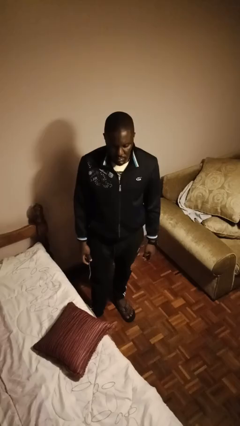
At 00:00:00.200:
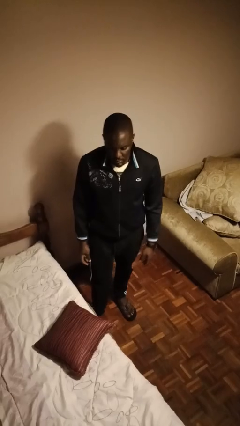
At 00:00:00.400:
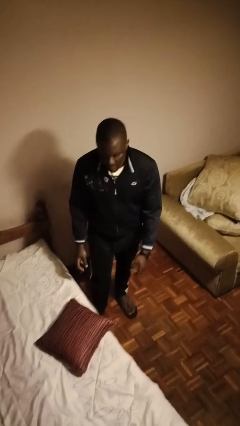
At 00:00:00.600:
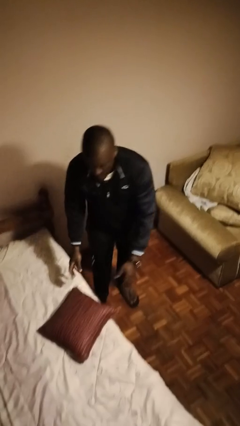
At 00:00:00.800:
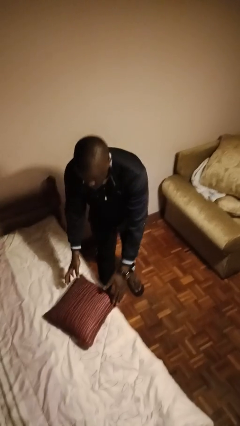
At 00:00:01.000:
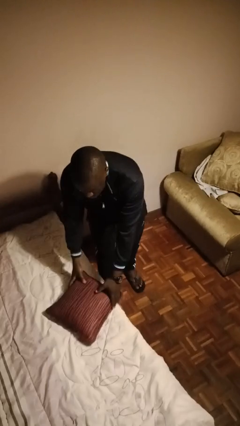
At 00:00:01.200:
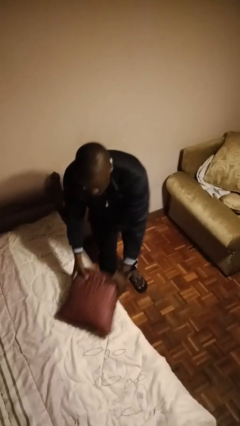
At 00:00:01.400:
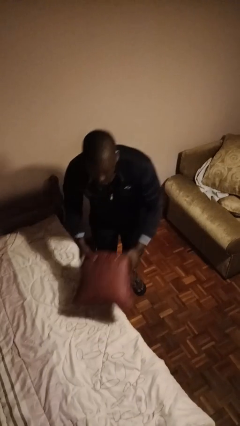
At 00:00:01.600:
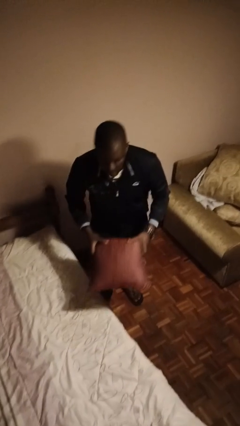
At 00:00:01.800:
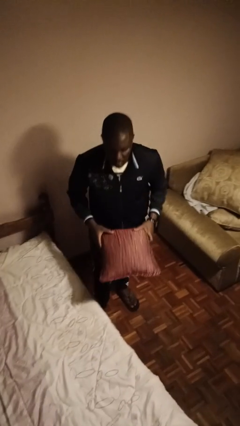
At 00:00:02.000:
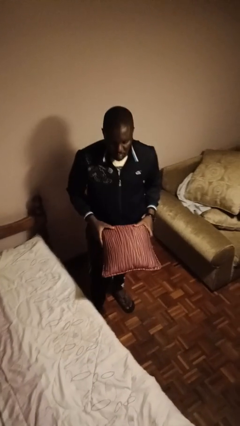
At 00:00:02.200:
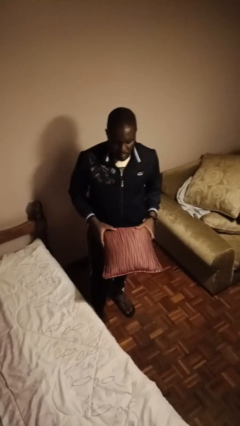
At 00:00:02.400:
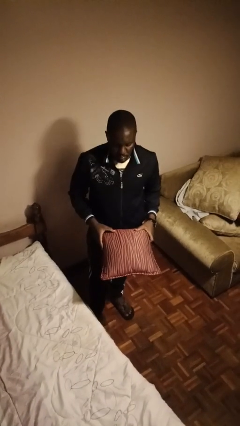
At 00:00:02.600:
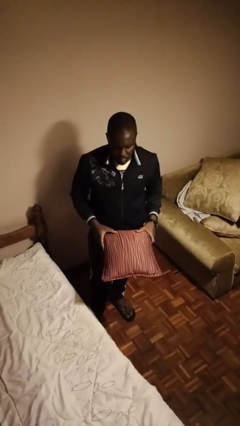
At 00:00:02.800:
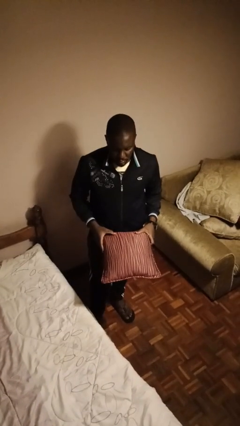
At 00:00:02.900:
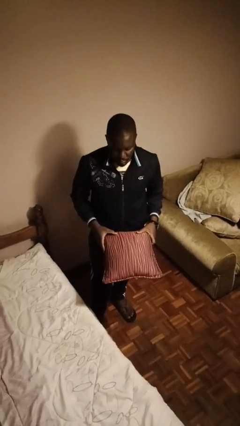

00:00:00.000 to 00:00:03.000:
person picks up object from bed

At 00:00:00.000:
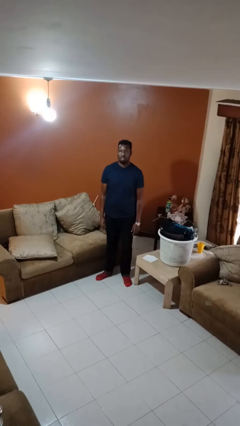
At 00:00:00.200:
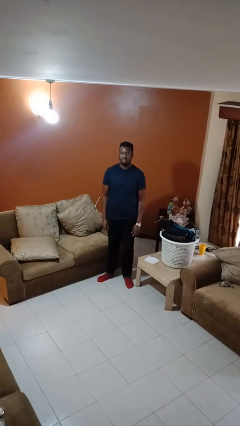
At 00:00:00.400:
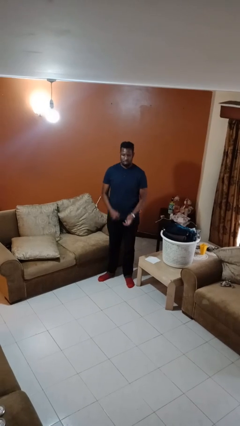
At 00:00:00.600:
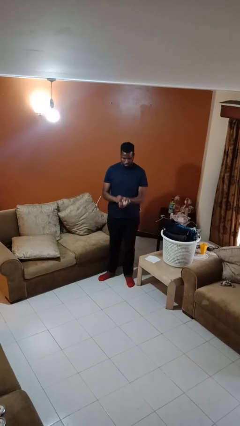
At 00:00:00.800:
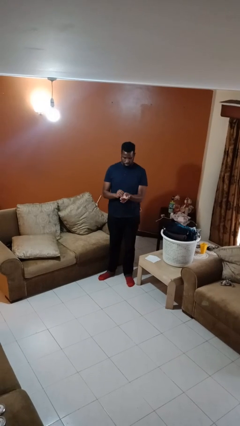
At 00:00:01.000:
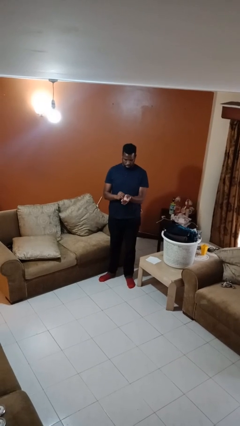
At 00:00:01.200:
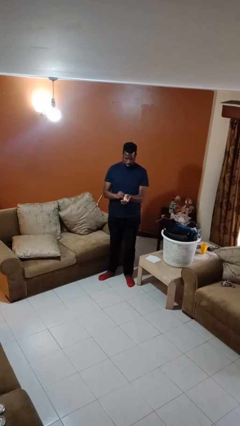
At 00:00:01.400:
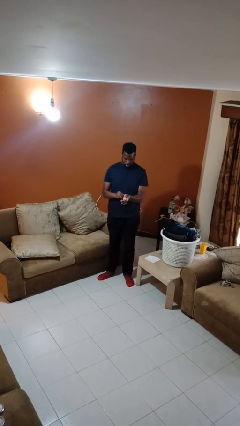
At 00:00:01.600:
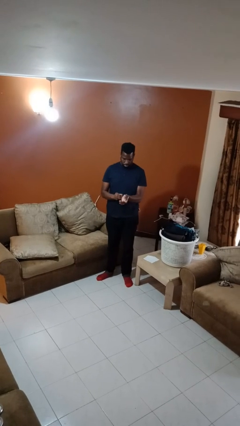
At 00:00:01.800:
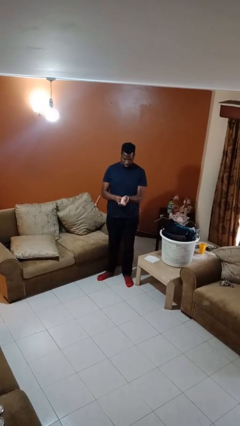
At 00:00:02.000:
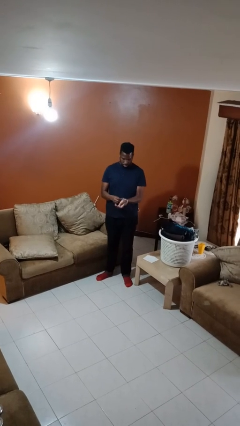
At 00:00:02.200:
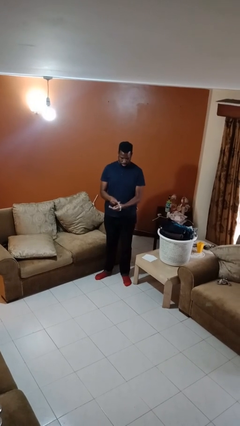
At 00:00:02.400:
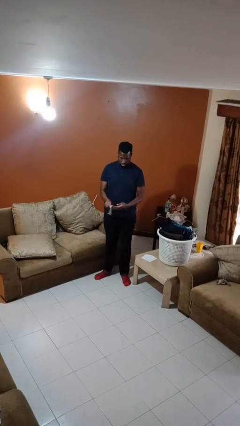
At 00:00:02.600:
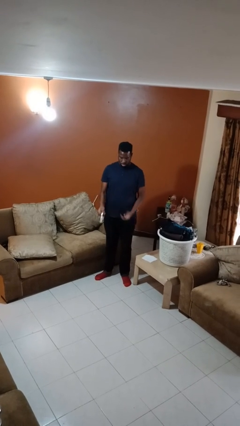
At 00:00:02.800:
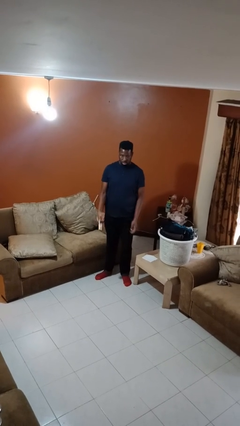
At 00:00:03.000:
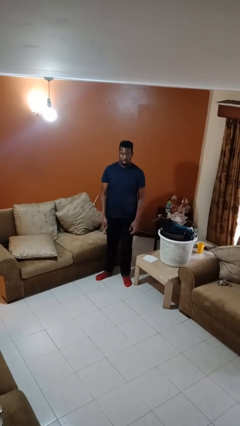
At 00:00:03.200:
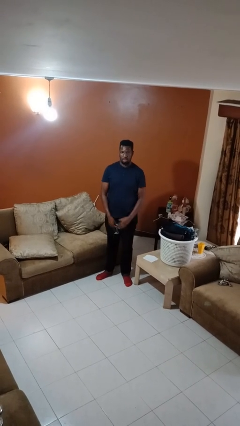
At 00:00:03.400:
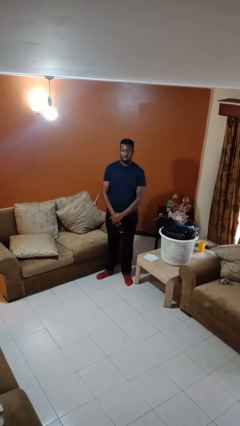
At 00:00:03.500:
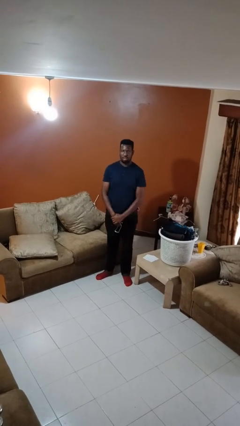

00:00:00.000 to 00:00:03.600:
person takes off wristwatch

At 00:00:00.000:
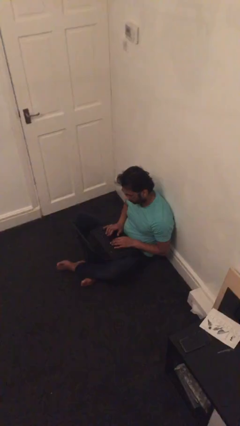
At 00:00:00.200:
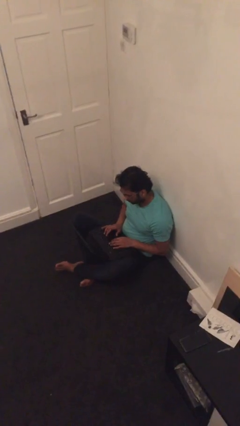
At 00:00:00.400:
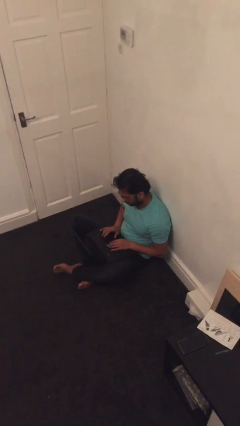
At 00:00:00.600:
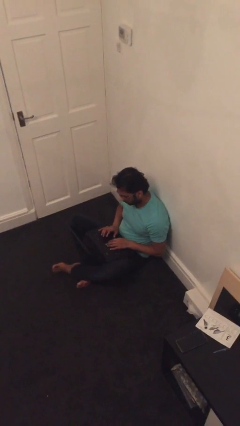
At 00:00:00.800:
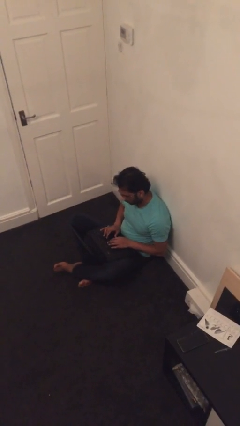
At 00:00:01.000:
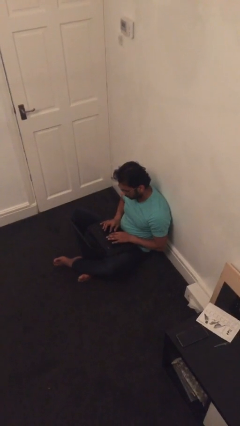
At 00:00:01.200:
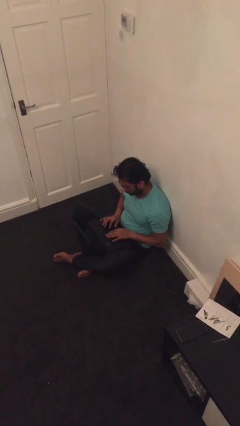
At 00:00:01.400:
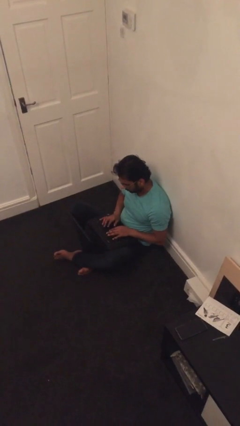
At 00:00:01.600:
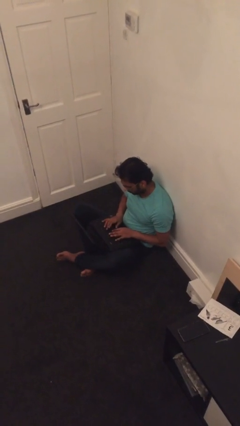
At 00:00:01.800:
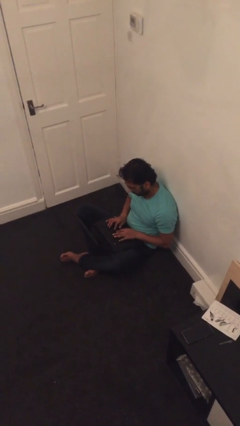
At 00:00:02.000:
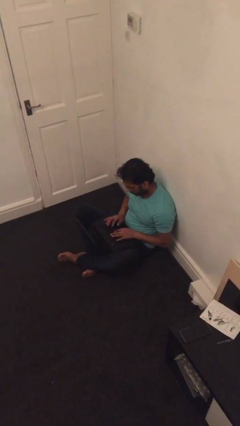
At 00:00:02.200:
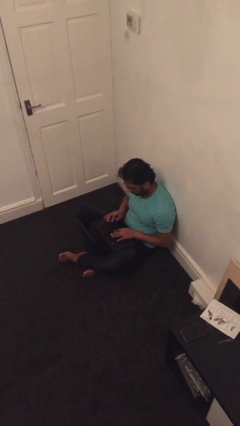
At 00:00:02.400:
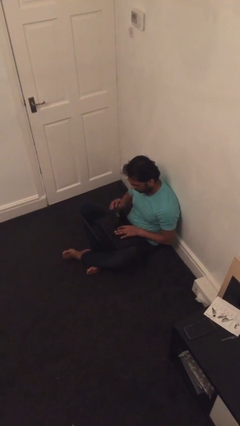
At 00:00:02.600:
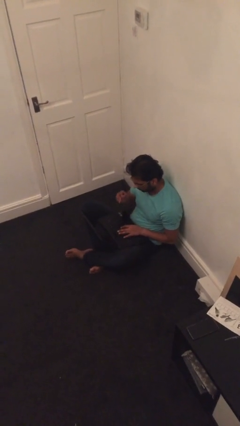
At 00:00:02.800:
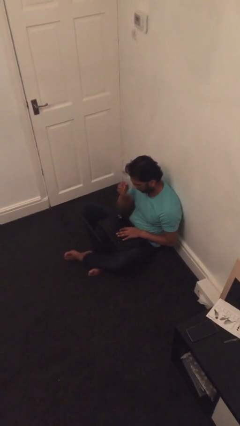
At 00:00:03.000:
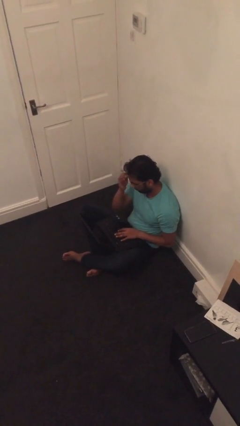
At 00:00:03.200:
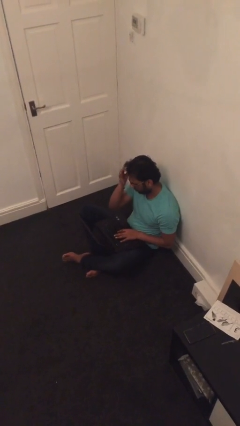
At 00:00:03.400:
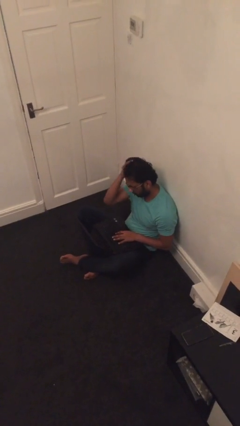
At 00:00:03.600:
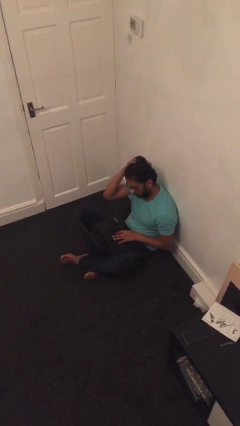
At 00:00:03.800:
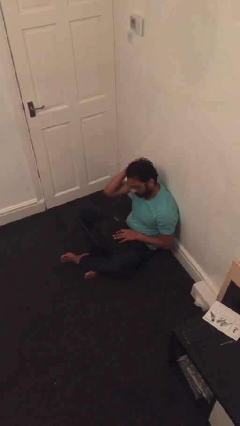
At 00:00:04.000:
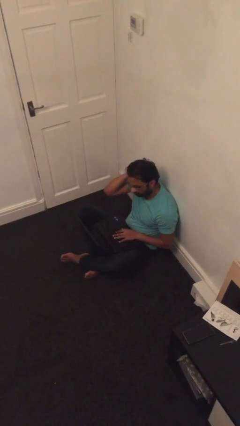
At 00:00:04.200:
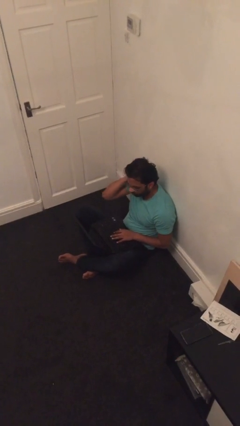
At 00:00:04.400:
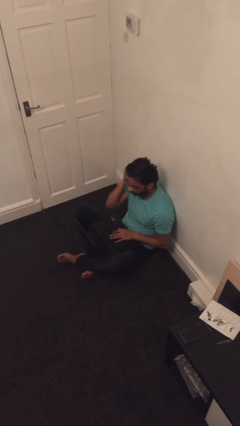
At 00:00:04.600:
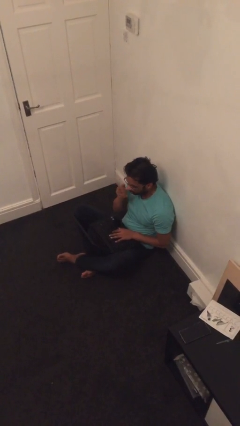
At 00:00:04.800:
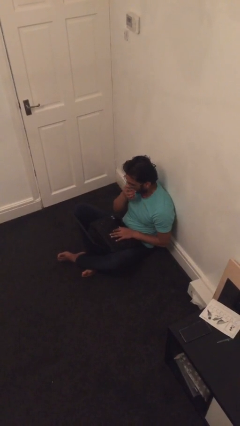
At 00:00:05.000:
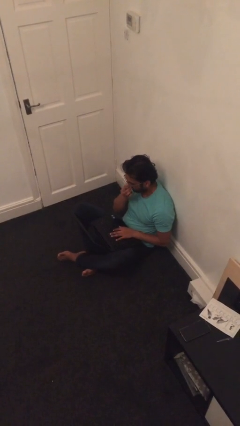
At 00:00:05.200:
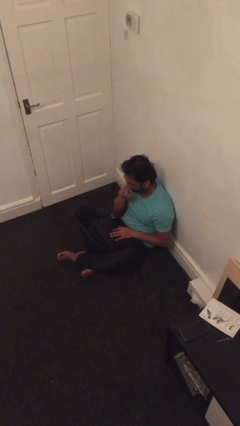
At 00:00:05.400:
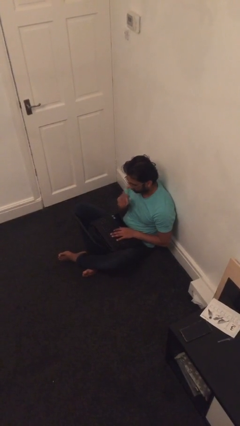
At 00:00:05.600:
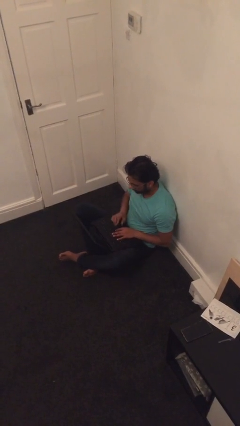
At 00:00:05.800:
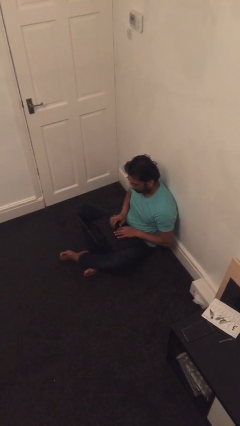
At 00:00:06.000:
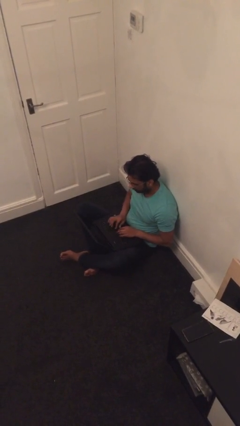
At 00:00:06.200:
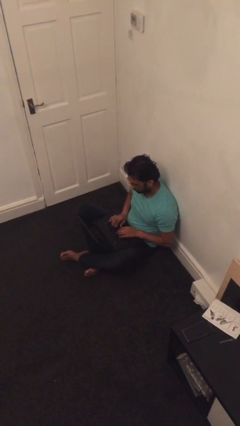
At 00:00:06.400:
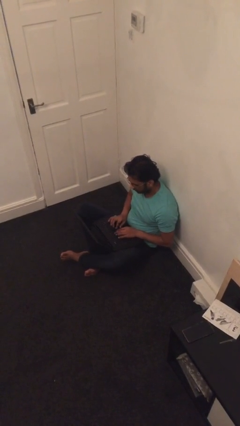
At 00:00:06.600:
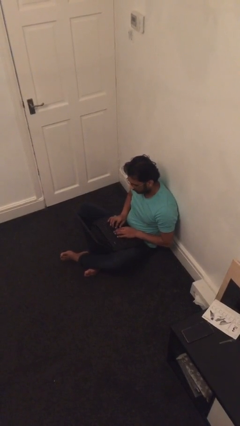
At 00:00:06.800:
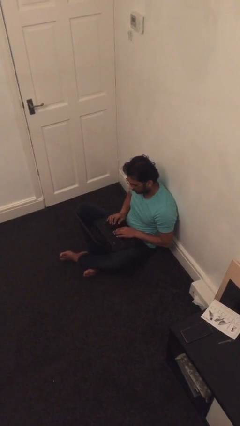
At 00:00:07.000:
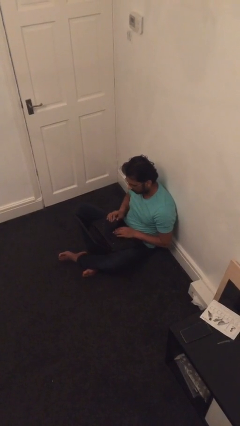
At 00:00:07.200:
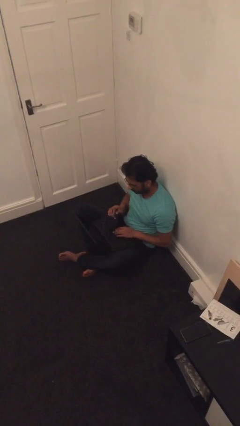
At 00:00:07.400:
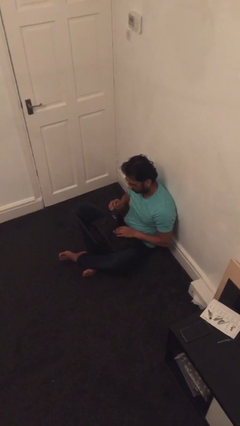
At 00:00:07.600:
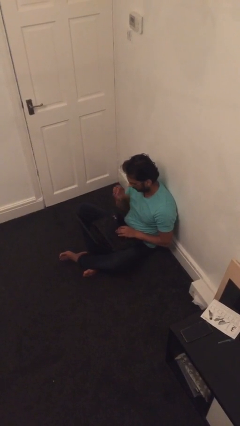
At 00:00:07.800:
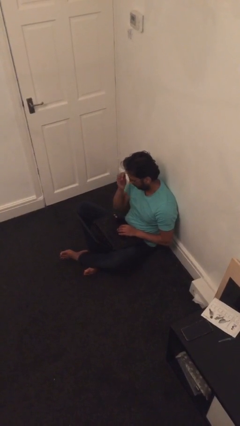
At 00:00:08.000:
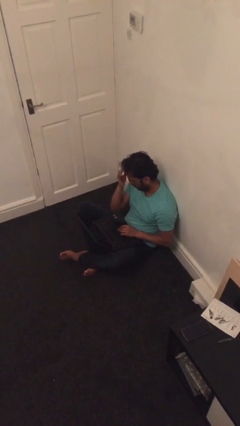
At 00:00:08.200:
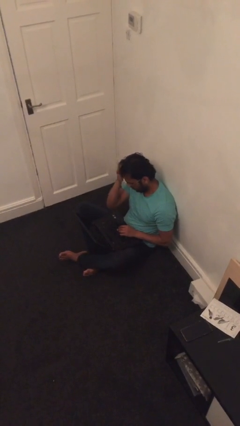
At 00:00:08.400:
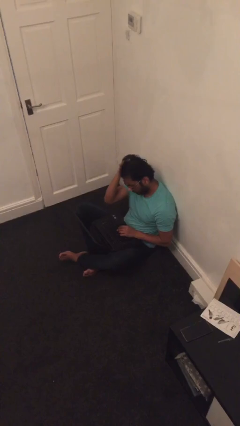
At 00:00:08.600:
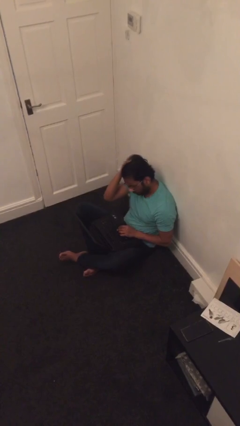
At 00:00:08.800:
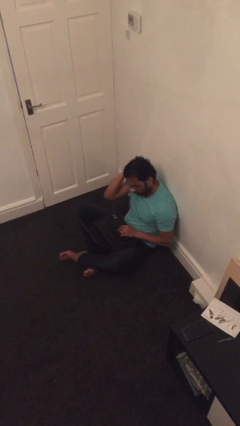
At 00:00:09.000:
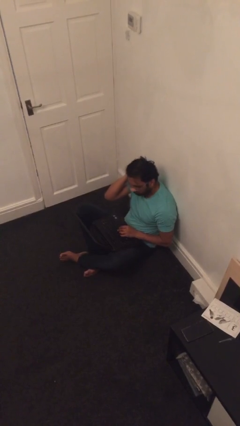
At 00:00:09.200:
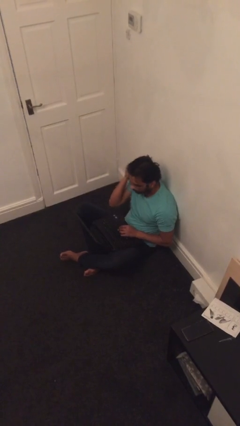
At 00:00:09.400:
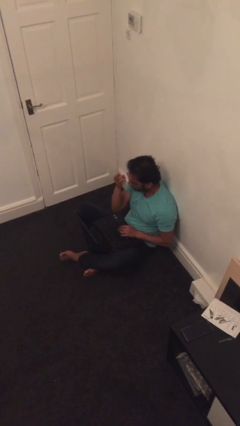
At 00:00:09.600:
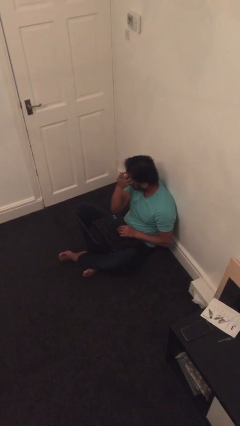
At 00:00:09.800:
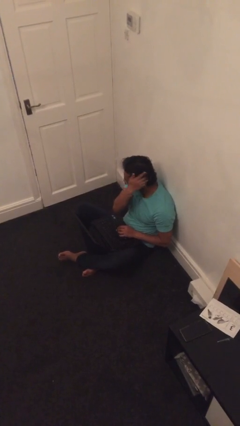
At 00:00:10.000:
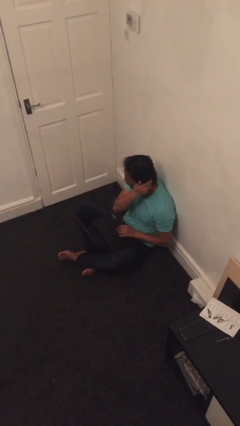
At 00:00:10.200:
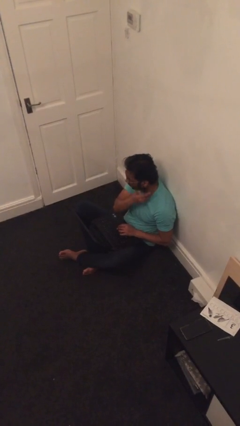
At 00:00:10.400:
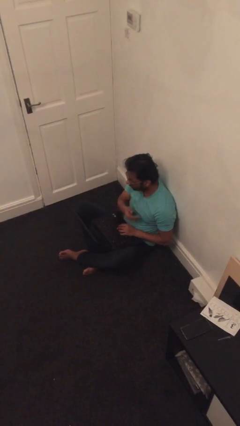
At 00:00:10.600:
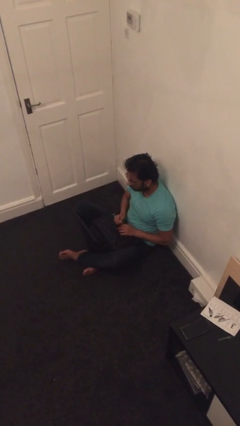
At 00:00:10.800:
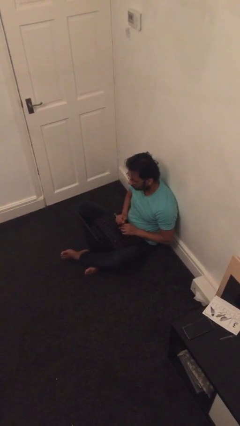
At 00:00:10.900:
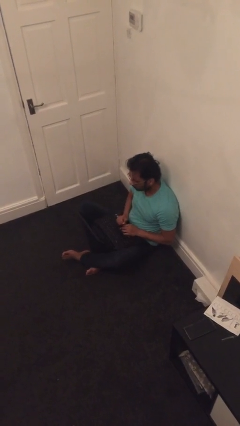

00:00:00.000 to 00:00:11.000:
person interacts with laptop
